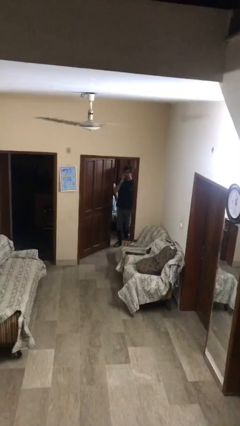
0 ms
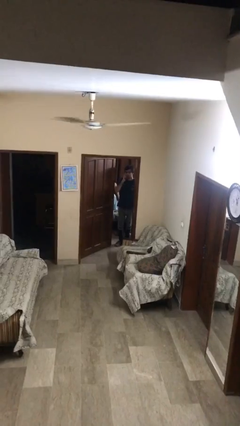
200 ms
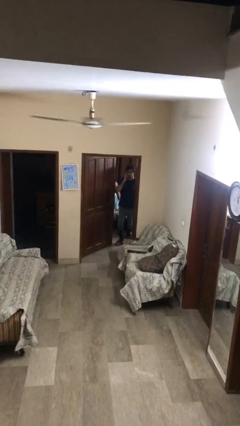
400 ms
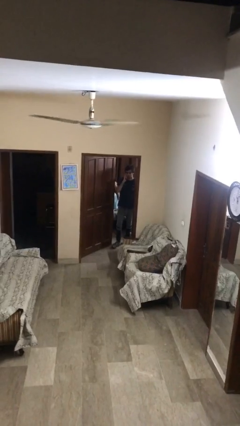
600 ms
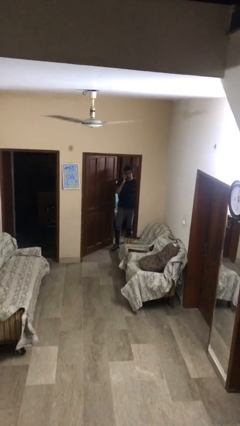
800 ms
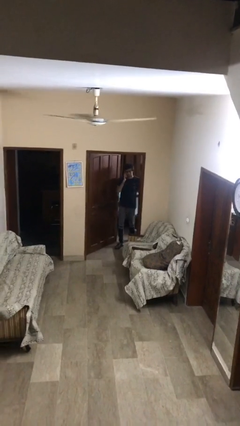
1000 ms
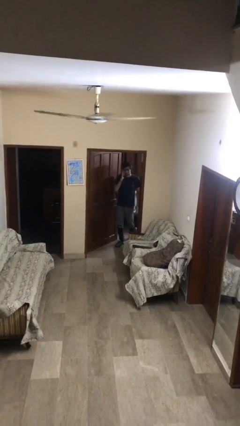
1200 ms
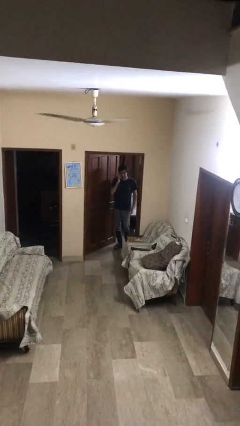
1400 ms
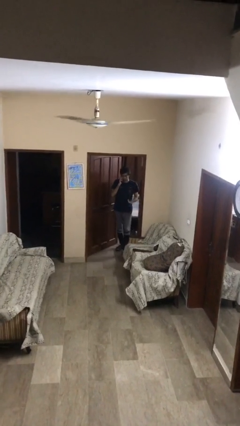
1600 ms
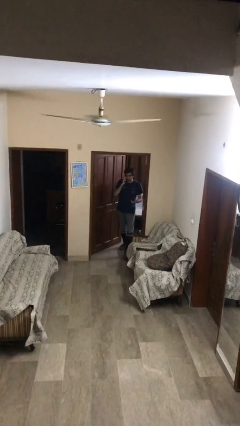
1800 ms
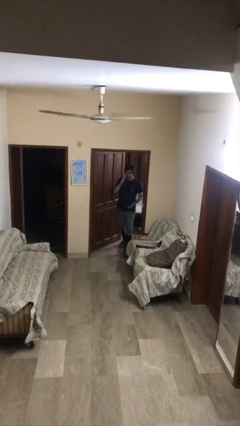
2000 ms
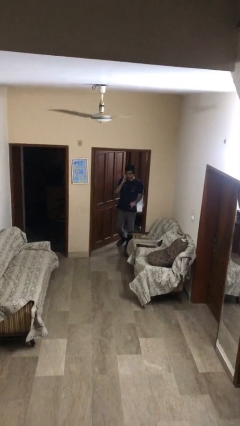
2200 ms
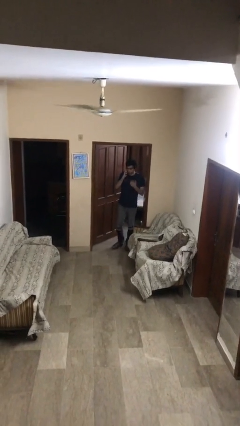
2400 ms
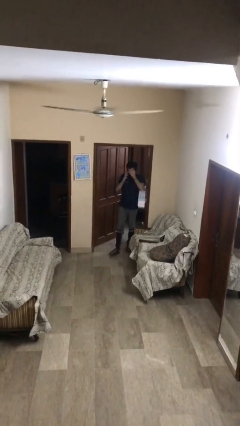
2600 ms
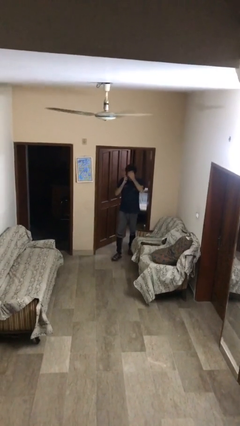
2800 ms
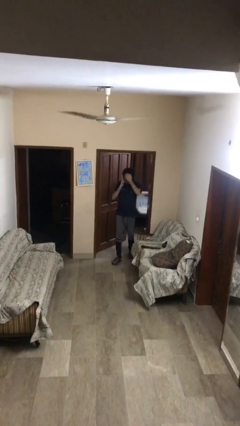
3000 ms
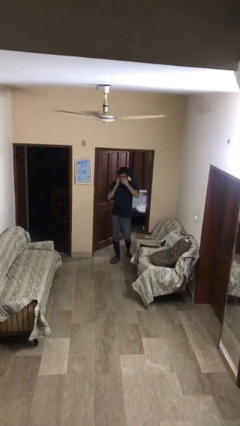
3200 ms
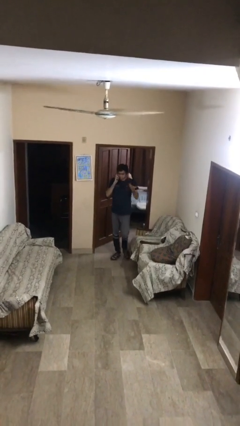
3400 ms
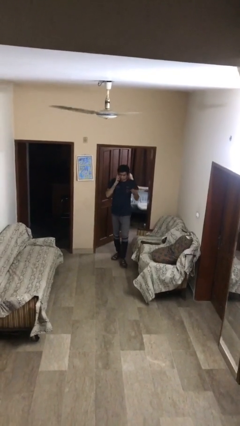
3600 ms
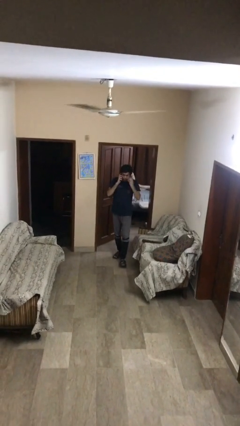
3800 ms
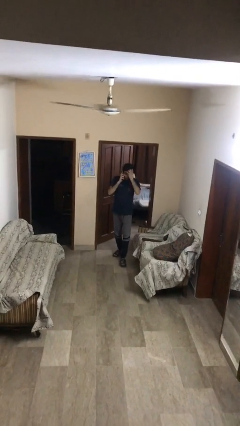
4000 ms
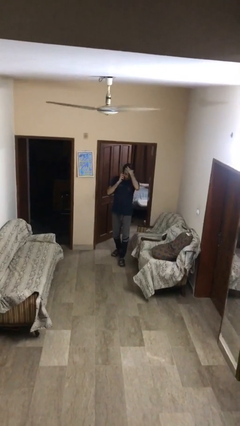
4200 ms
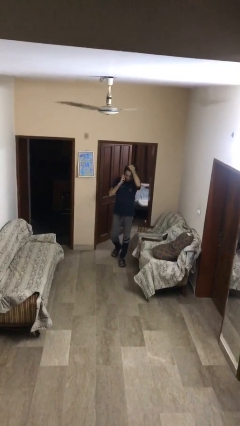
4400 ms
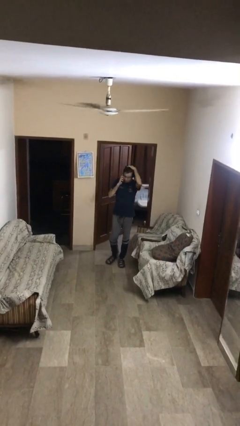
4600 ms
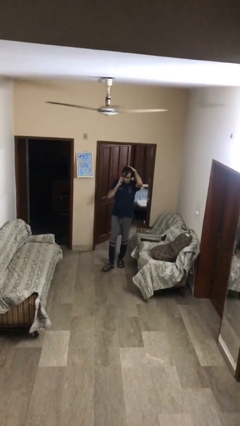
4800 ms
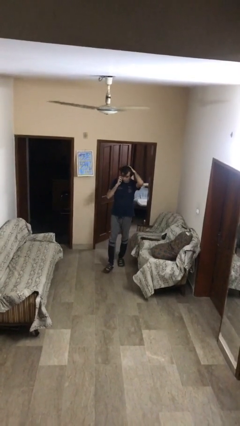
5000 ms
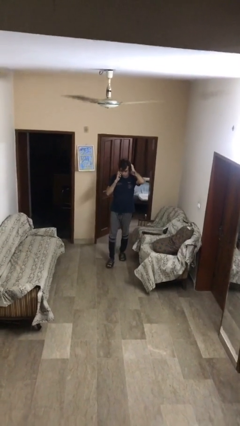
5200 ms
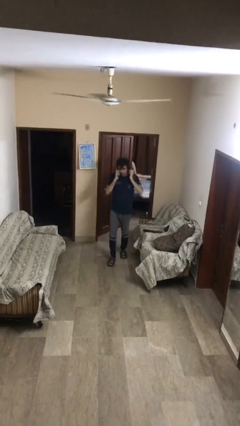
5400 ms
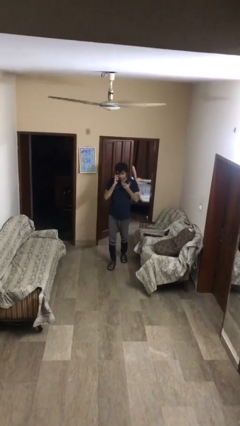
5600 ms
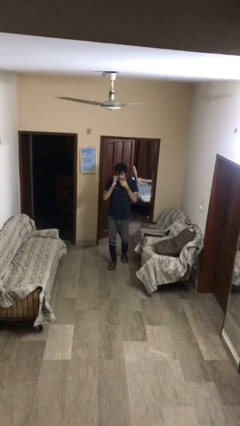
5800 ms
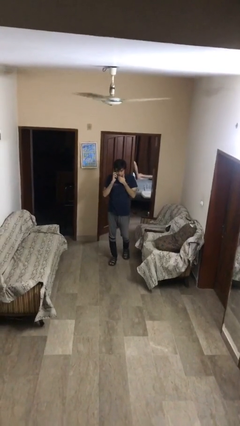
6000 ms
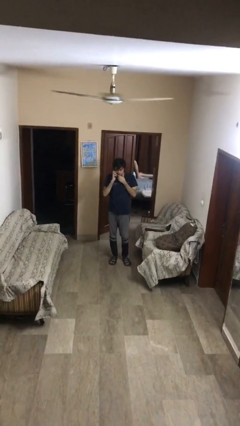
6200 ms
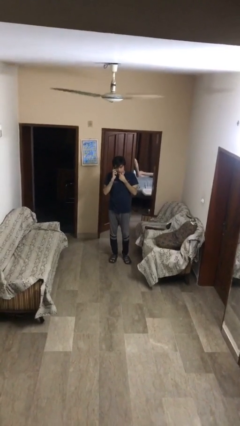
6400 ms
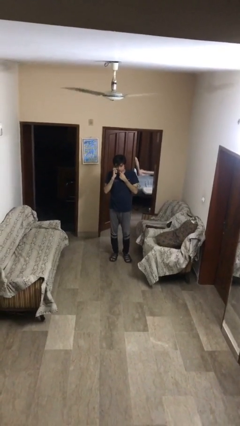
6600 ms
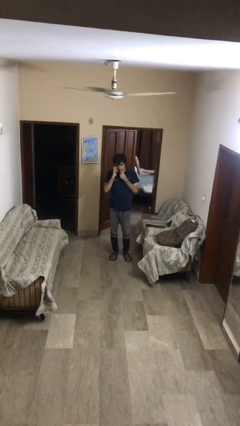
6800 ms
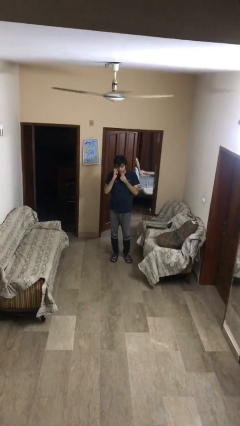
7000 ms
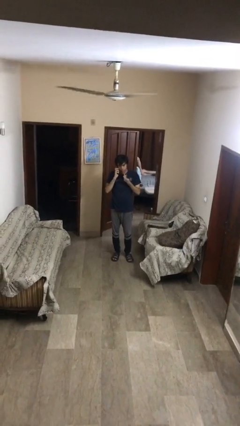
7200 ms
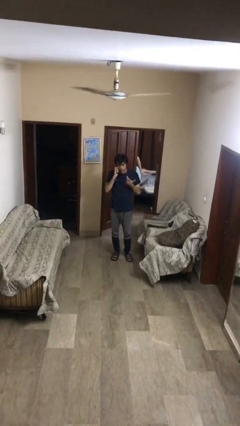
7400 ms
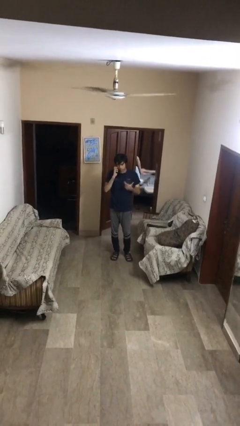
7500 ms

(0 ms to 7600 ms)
person enters scene through structure

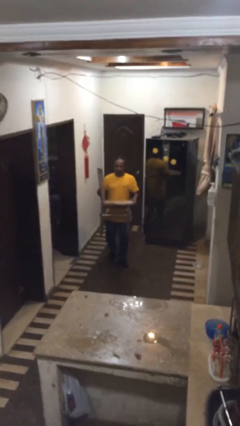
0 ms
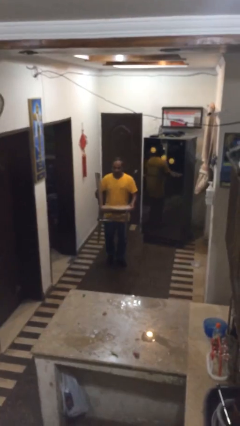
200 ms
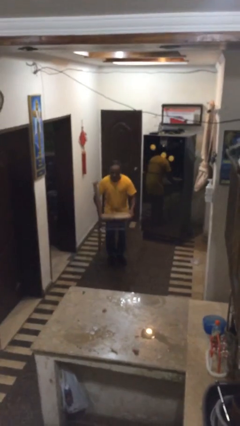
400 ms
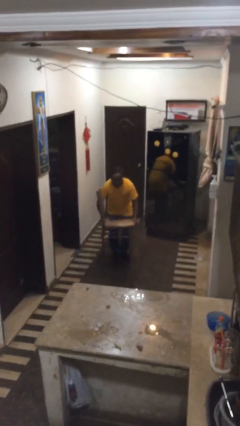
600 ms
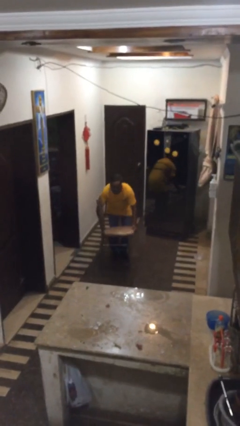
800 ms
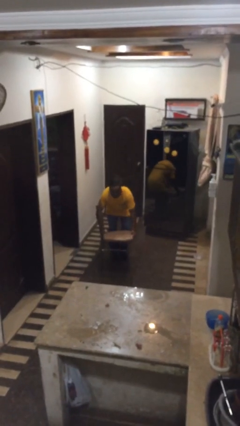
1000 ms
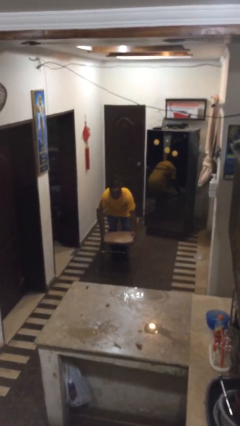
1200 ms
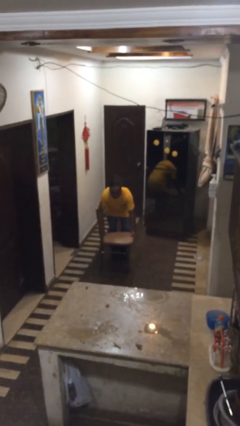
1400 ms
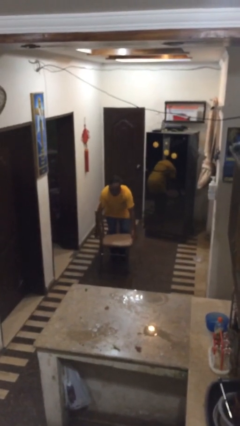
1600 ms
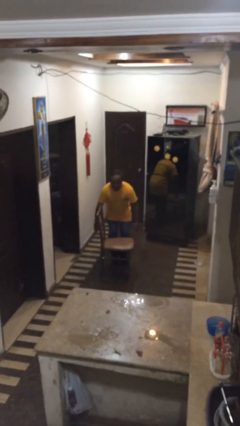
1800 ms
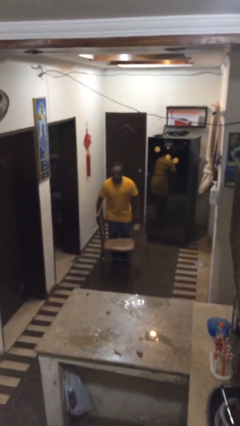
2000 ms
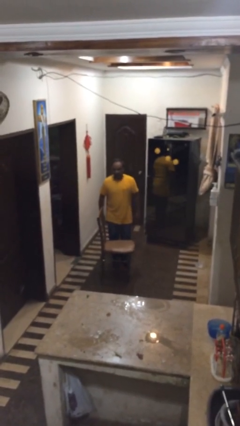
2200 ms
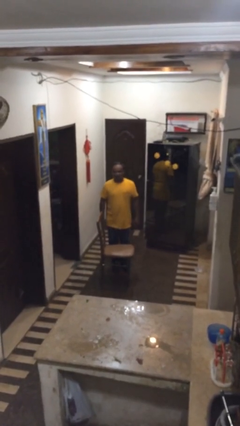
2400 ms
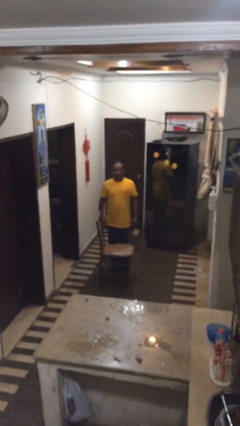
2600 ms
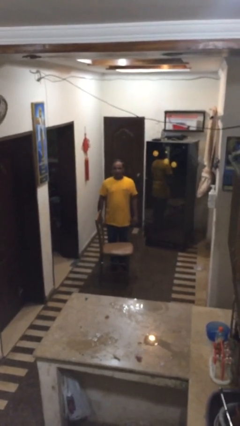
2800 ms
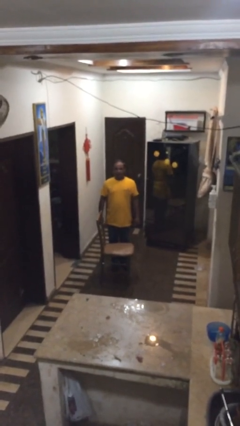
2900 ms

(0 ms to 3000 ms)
person puts down object on floor

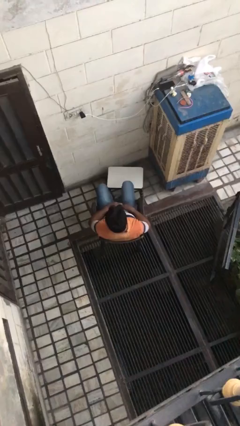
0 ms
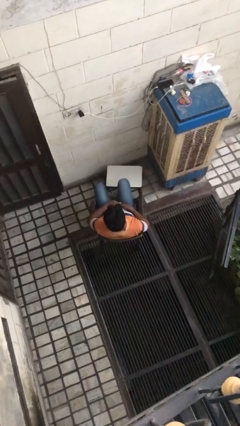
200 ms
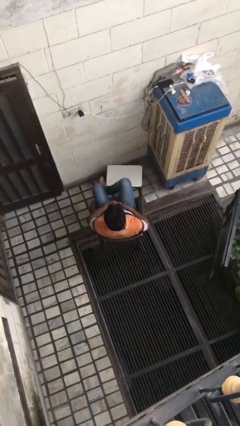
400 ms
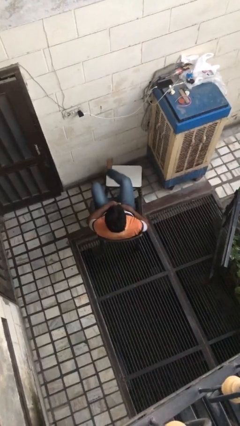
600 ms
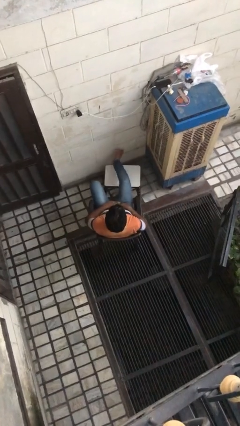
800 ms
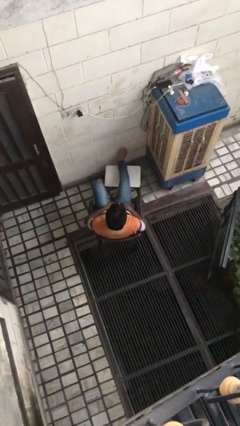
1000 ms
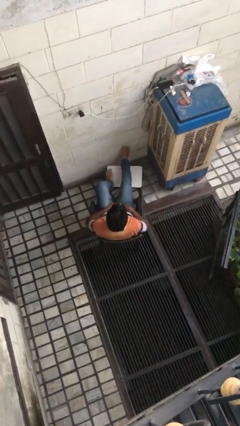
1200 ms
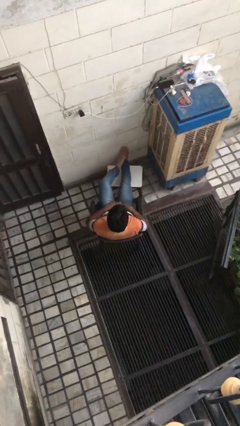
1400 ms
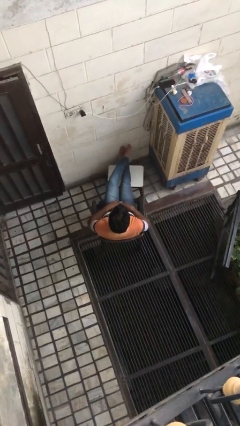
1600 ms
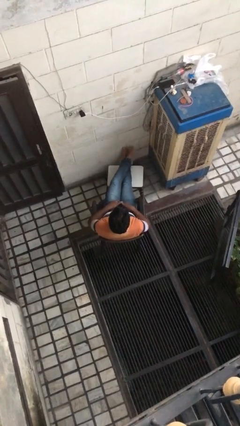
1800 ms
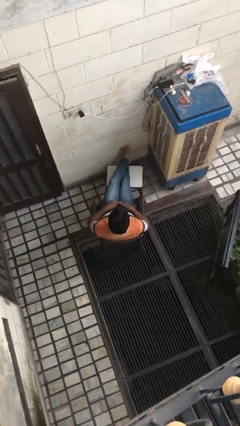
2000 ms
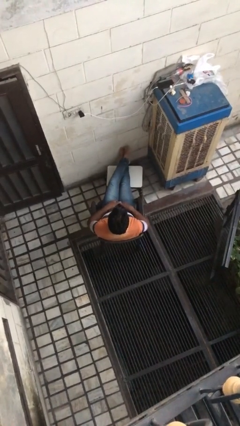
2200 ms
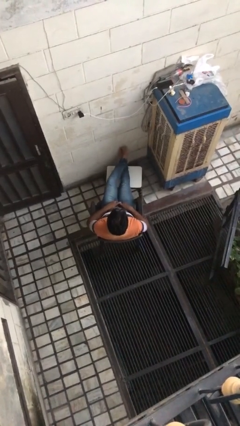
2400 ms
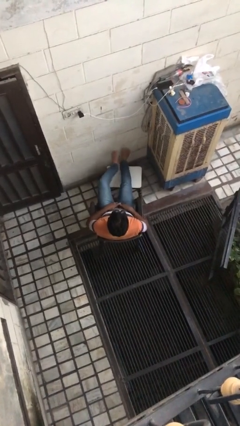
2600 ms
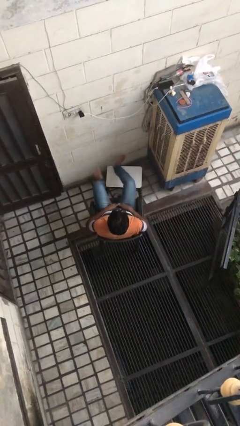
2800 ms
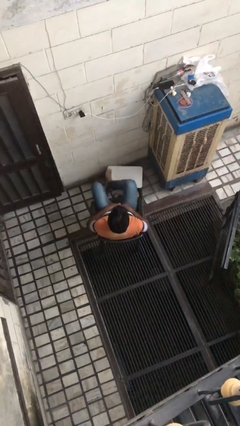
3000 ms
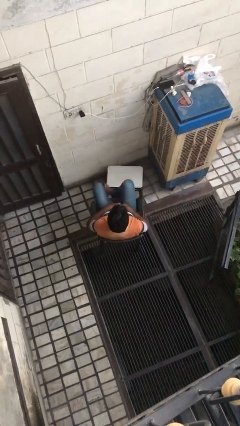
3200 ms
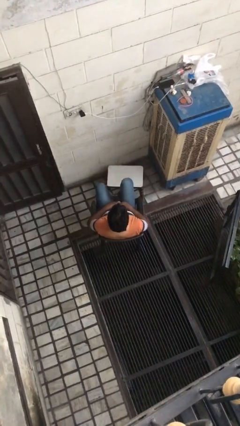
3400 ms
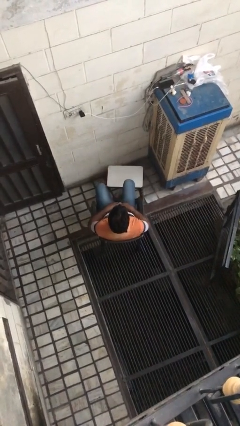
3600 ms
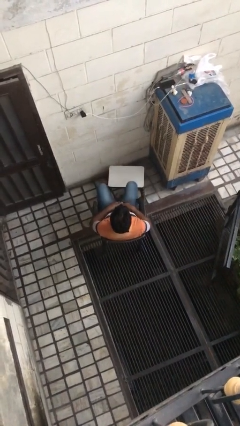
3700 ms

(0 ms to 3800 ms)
person puts feet up

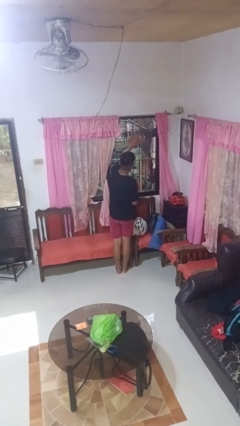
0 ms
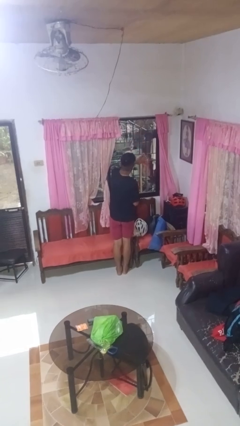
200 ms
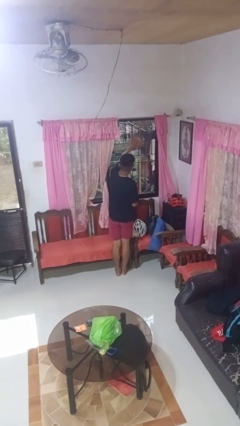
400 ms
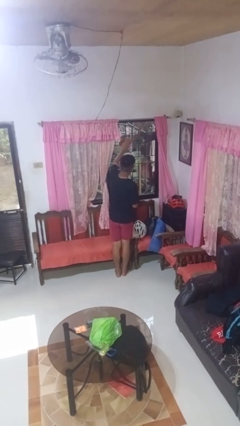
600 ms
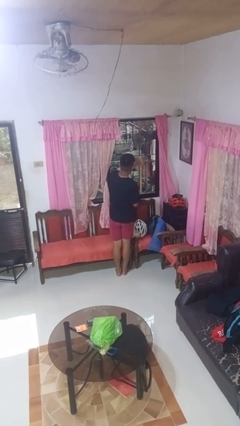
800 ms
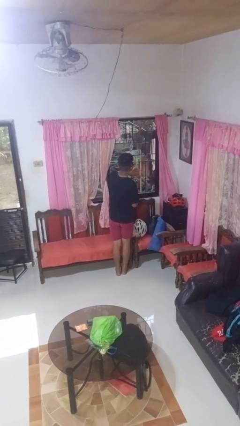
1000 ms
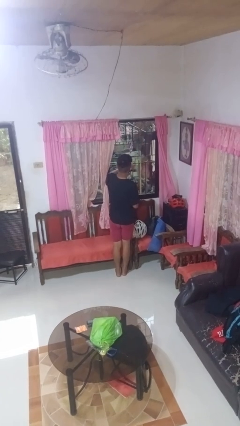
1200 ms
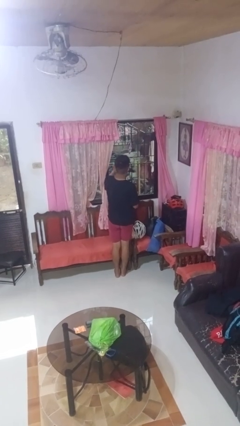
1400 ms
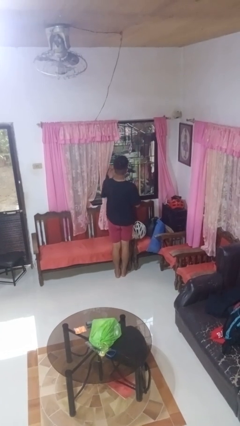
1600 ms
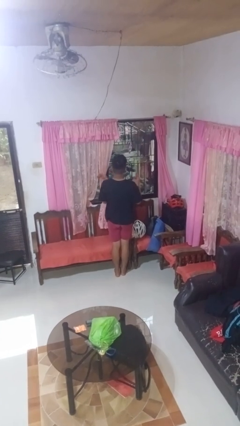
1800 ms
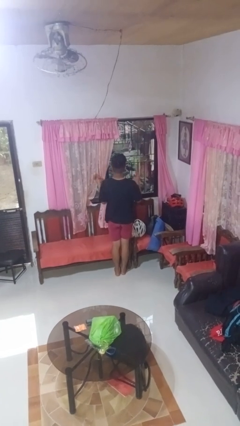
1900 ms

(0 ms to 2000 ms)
person washes window

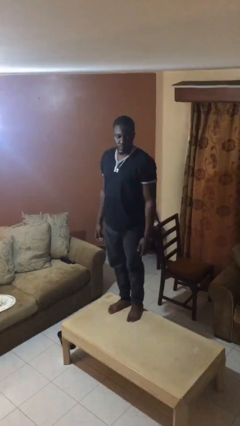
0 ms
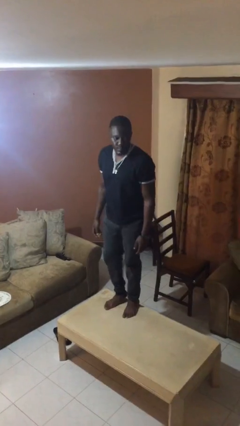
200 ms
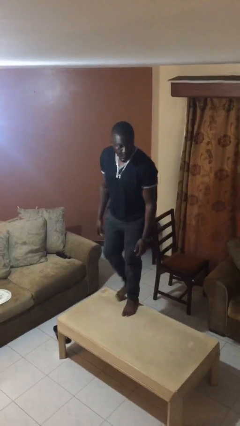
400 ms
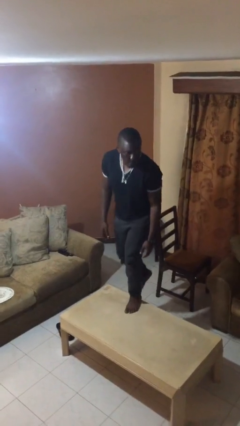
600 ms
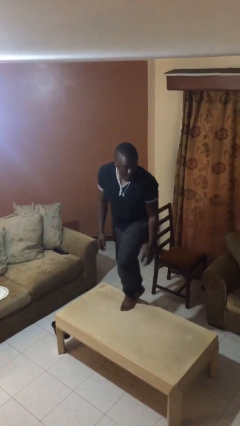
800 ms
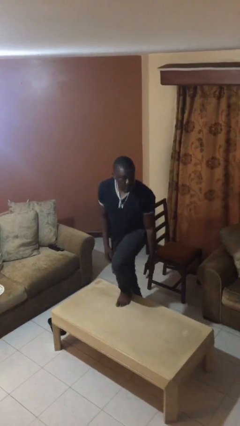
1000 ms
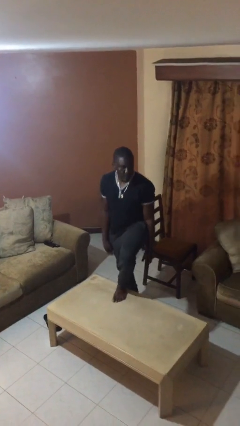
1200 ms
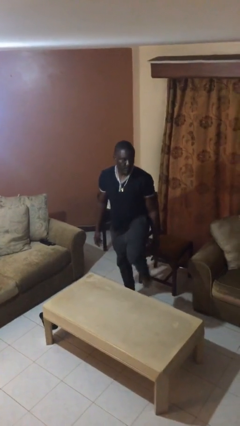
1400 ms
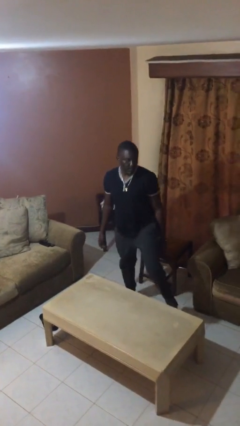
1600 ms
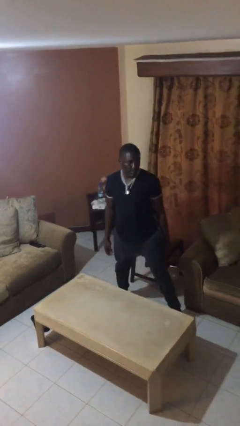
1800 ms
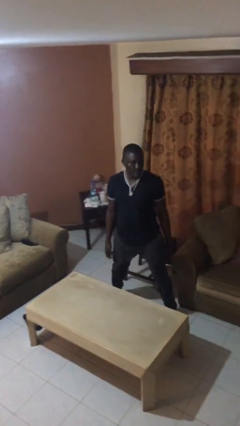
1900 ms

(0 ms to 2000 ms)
person climbs off table
